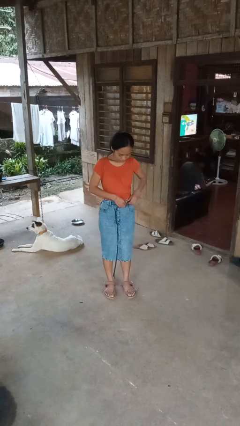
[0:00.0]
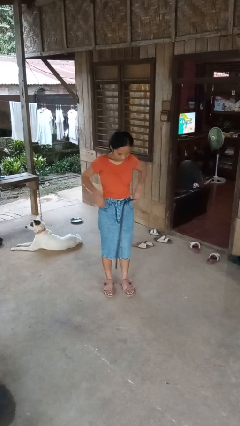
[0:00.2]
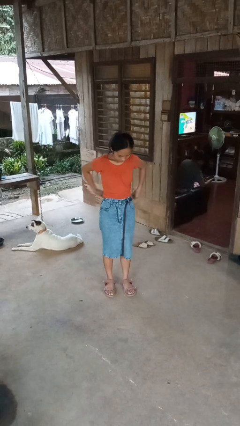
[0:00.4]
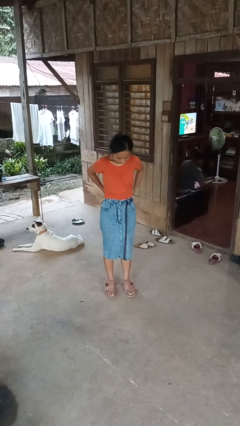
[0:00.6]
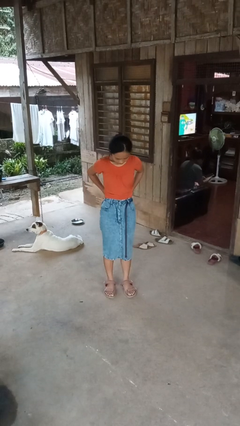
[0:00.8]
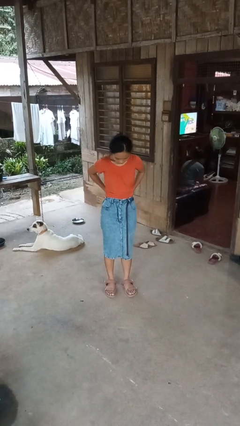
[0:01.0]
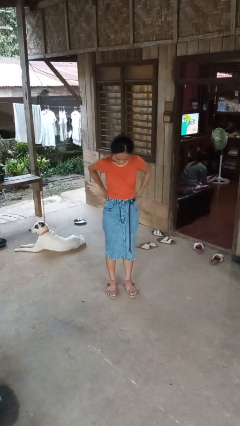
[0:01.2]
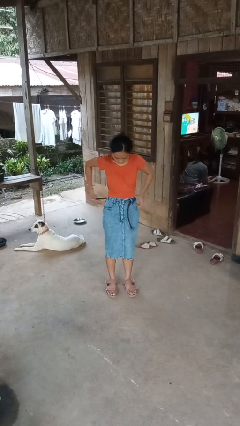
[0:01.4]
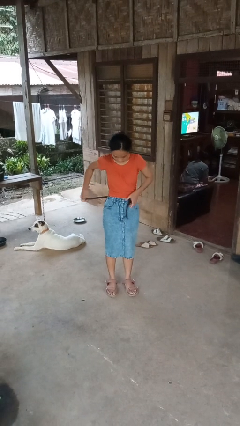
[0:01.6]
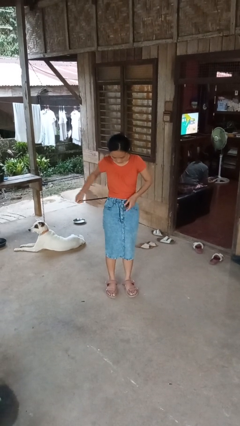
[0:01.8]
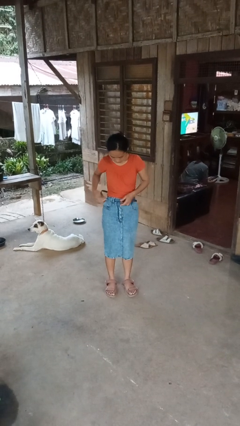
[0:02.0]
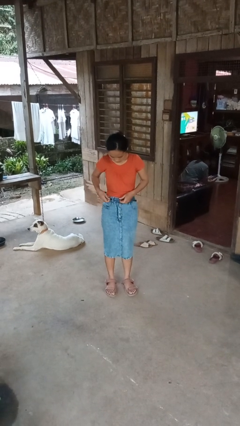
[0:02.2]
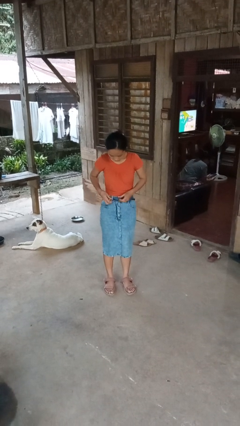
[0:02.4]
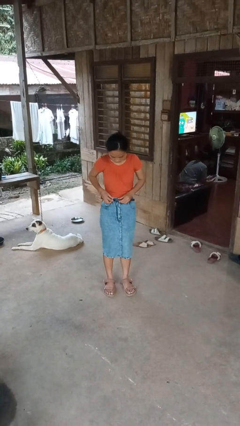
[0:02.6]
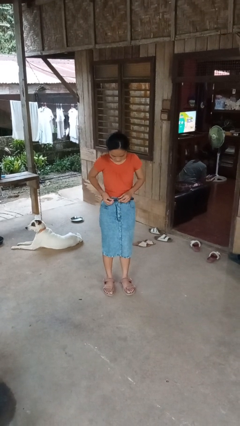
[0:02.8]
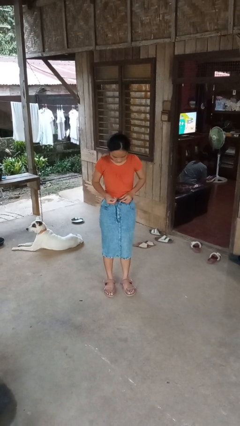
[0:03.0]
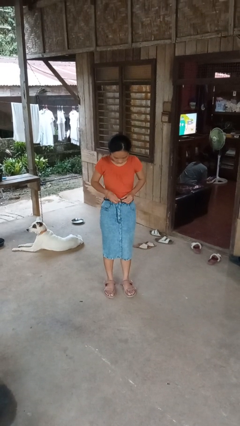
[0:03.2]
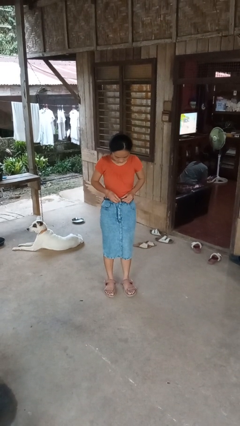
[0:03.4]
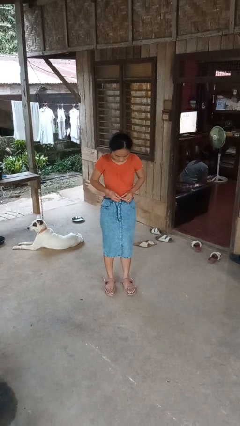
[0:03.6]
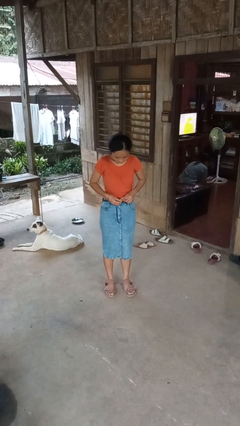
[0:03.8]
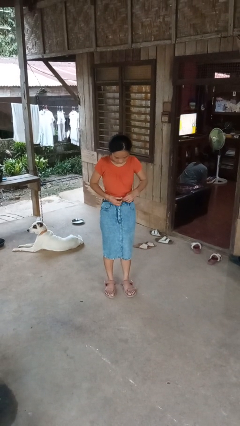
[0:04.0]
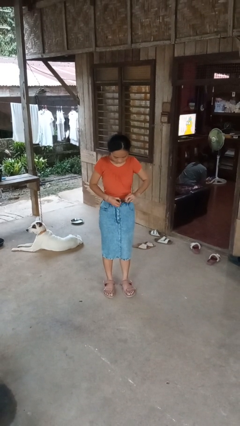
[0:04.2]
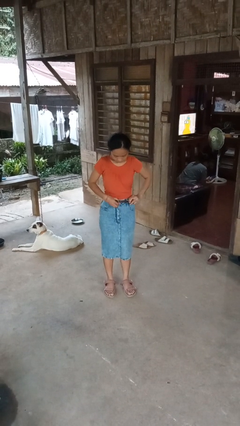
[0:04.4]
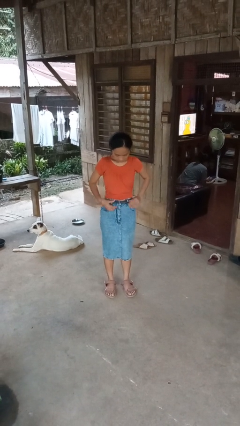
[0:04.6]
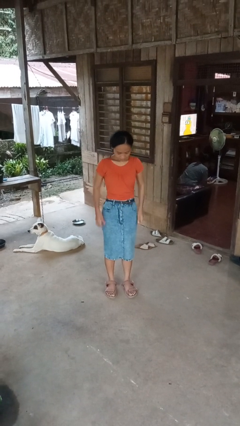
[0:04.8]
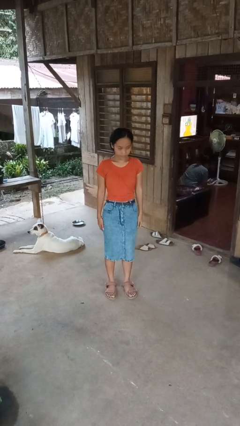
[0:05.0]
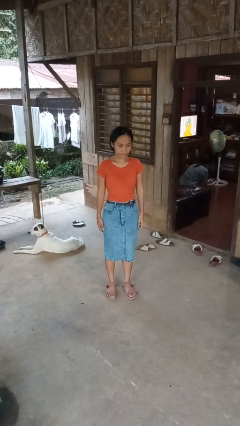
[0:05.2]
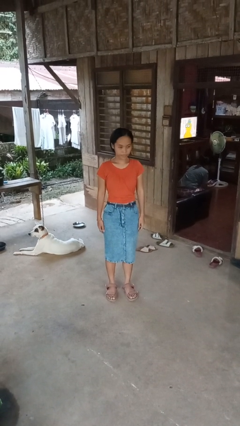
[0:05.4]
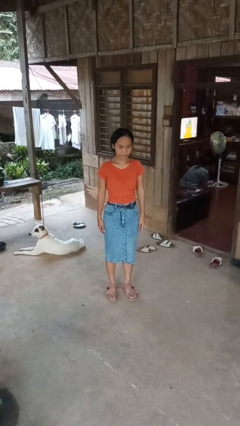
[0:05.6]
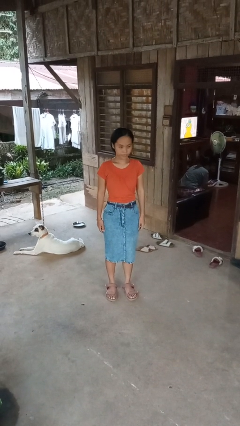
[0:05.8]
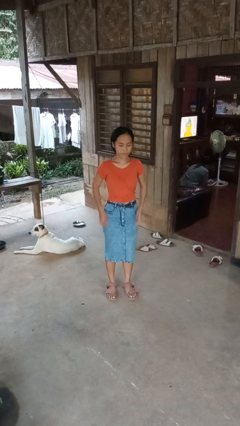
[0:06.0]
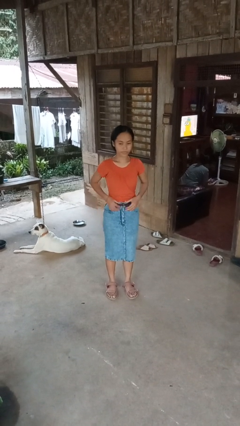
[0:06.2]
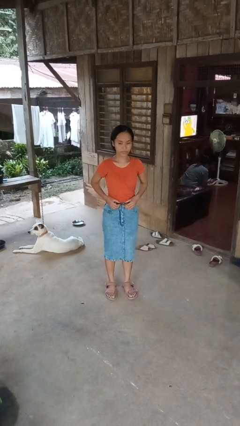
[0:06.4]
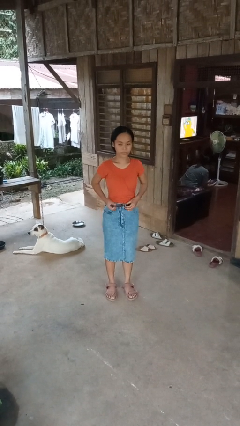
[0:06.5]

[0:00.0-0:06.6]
person puts on belt

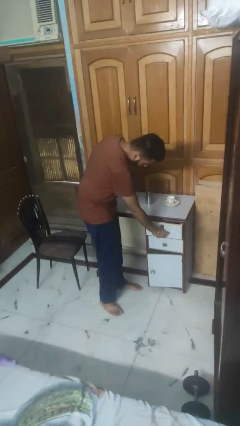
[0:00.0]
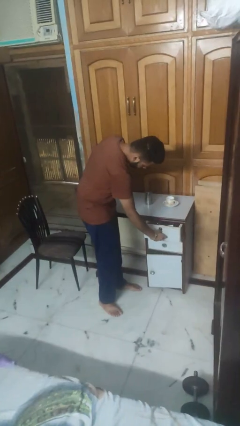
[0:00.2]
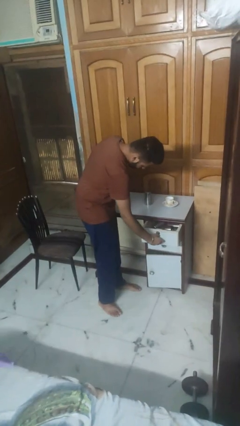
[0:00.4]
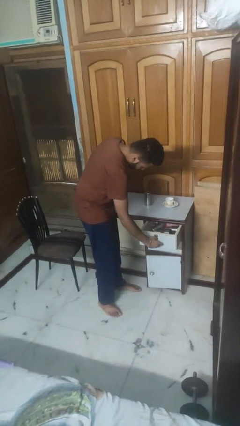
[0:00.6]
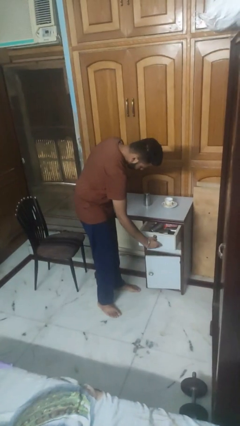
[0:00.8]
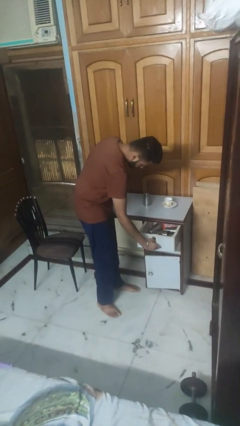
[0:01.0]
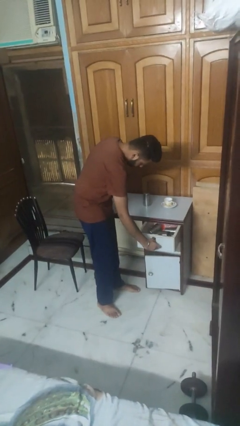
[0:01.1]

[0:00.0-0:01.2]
person opens kitchen drawer

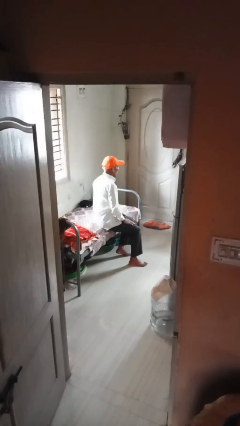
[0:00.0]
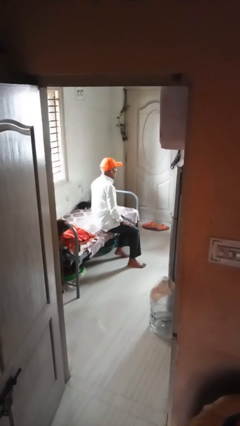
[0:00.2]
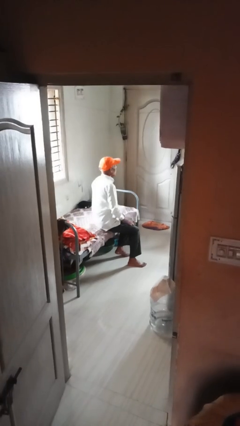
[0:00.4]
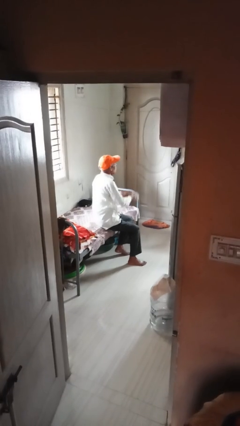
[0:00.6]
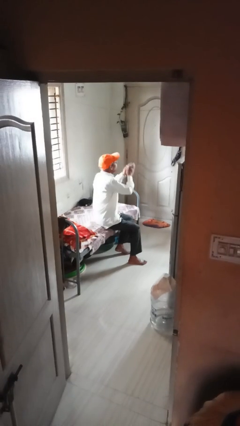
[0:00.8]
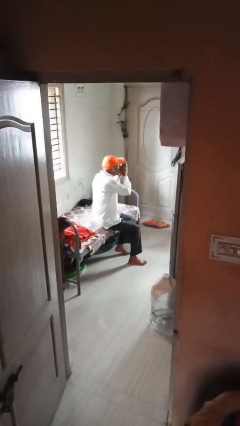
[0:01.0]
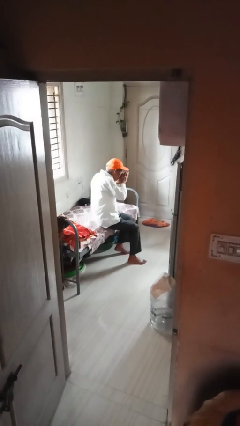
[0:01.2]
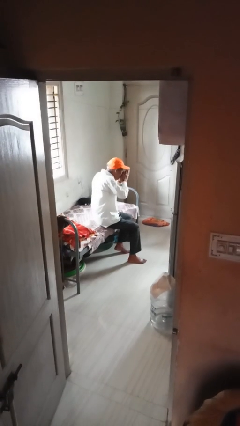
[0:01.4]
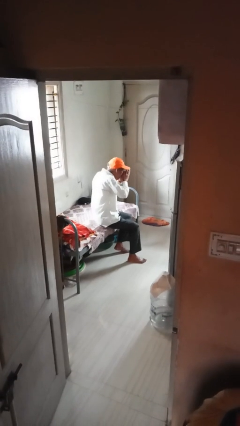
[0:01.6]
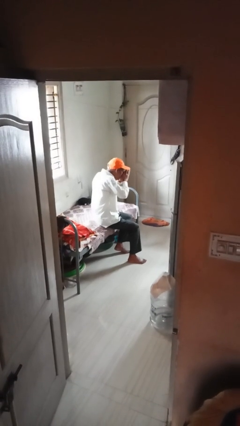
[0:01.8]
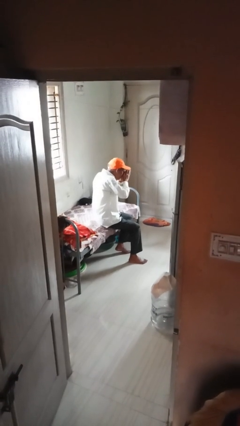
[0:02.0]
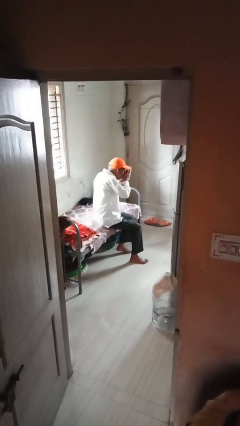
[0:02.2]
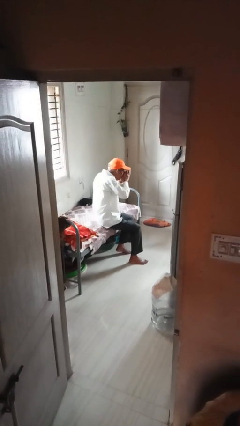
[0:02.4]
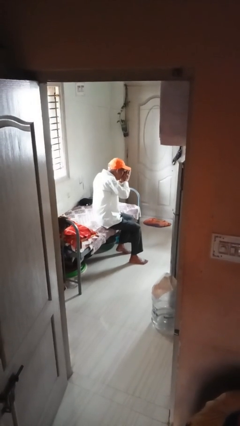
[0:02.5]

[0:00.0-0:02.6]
person sneezes into hand

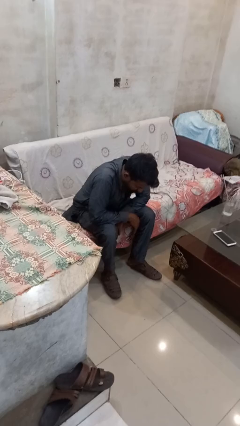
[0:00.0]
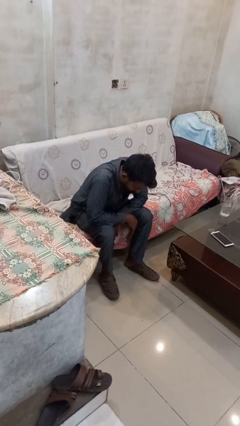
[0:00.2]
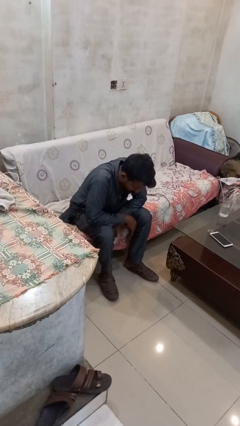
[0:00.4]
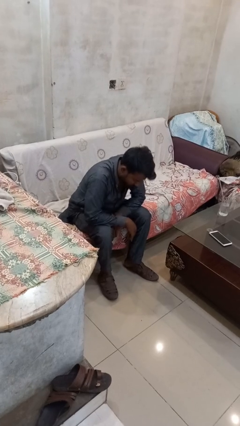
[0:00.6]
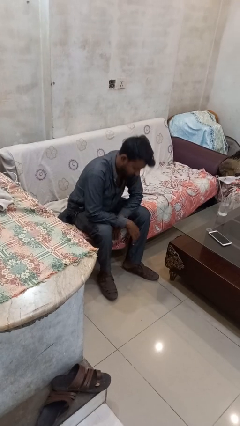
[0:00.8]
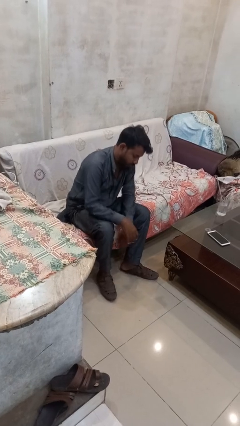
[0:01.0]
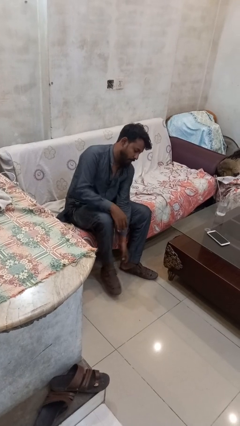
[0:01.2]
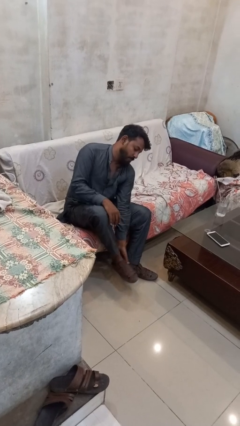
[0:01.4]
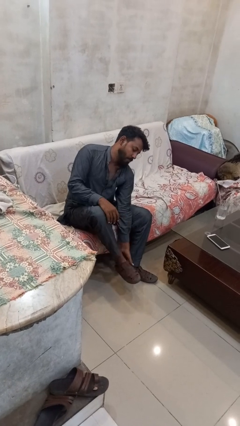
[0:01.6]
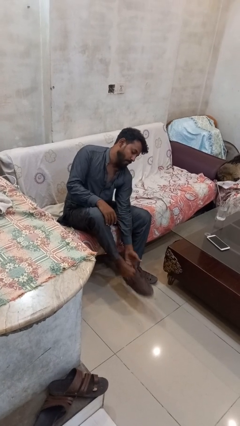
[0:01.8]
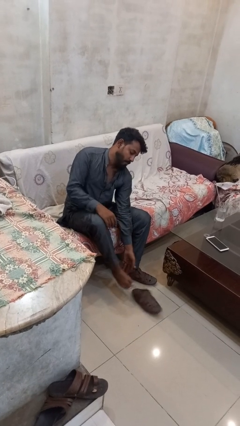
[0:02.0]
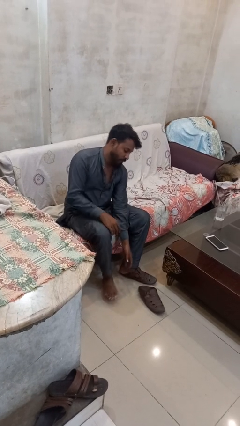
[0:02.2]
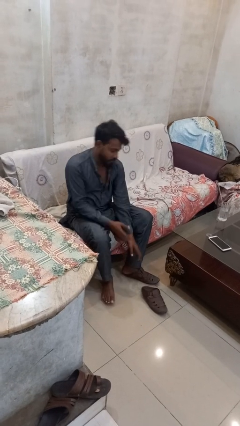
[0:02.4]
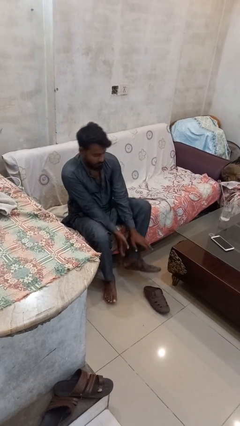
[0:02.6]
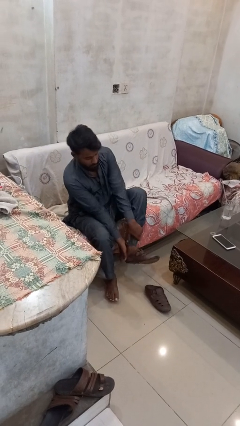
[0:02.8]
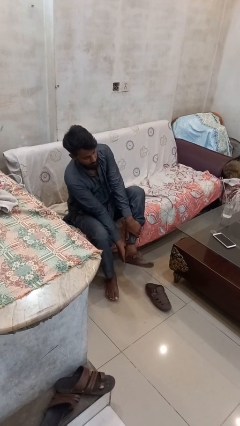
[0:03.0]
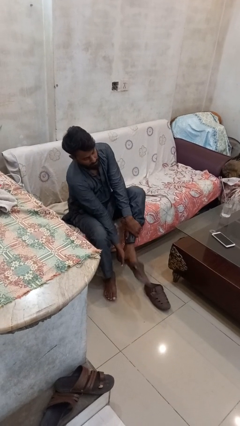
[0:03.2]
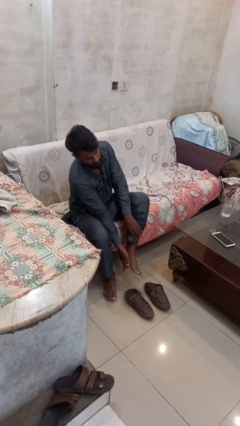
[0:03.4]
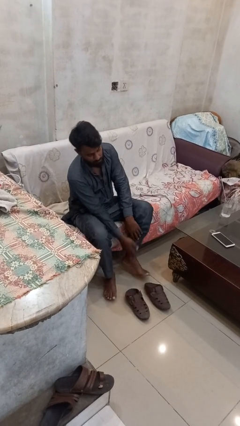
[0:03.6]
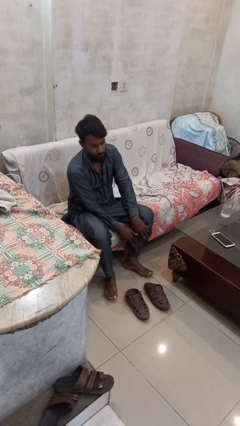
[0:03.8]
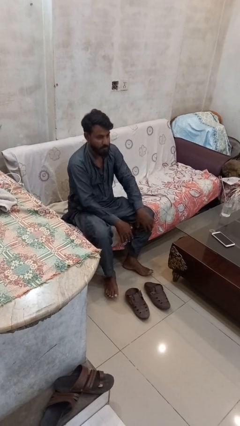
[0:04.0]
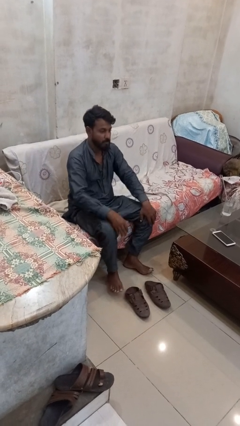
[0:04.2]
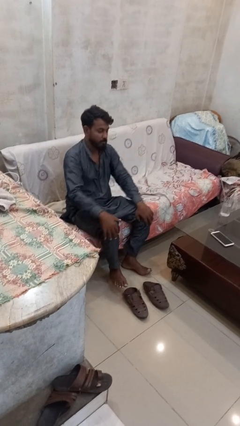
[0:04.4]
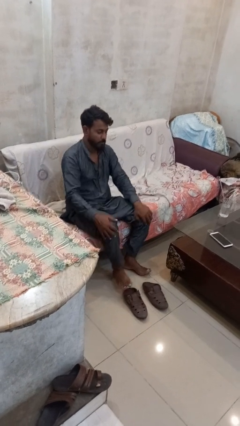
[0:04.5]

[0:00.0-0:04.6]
person takes off shoes

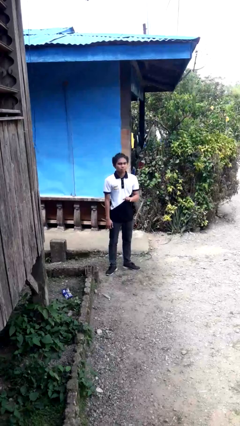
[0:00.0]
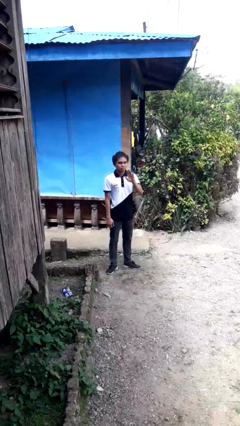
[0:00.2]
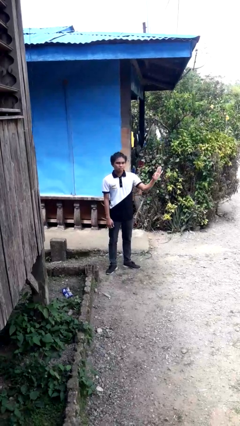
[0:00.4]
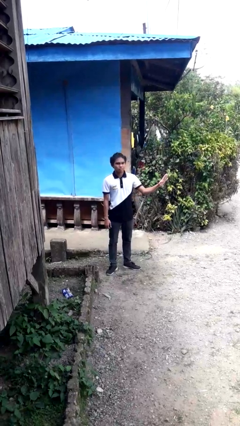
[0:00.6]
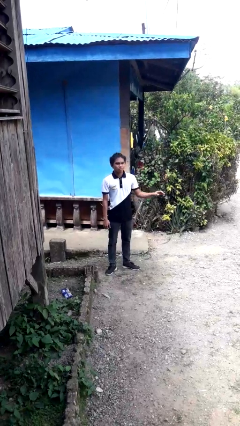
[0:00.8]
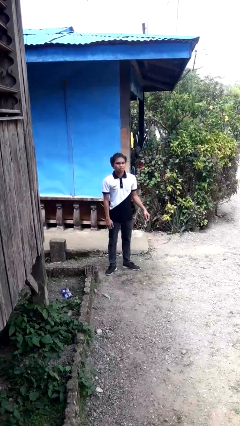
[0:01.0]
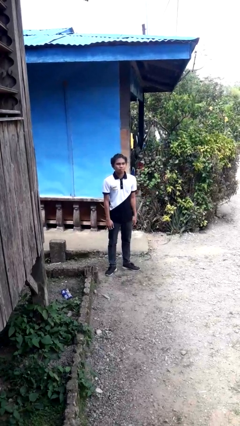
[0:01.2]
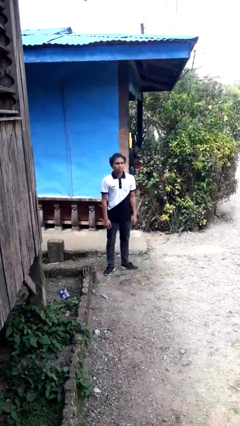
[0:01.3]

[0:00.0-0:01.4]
person gestures swipe left

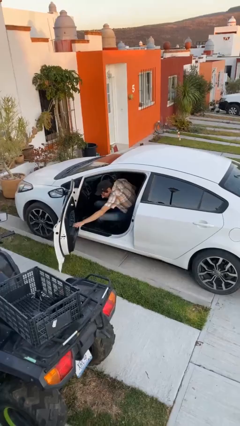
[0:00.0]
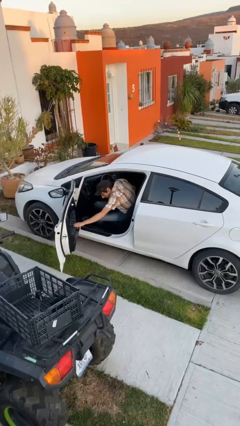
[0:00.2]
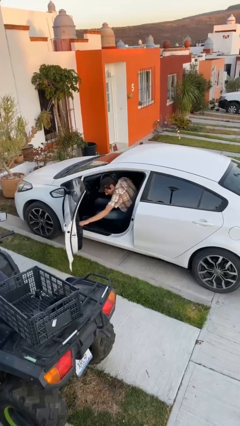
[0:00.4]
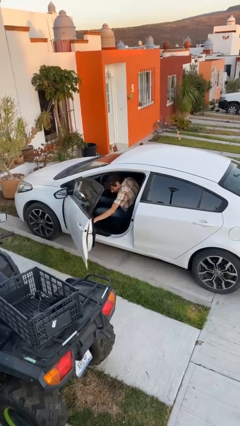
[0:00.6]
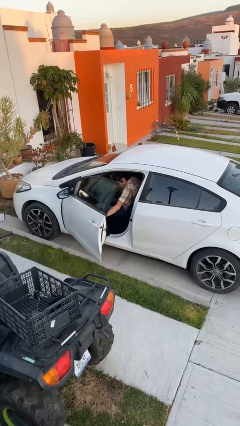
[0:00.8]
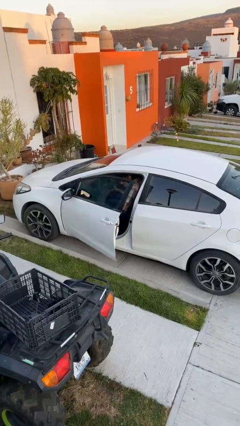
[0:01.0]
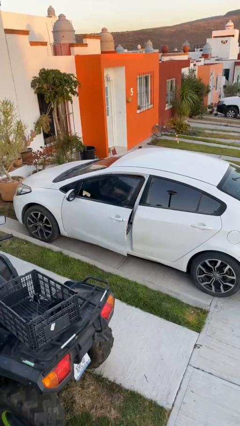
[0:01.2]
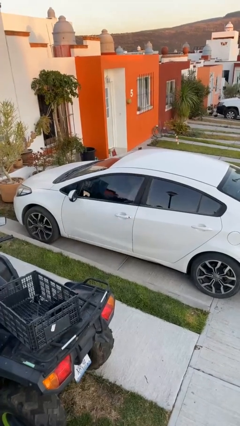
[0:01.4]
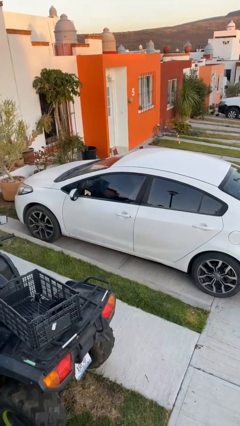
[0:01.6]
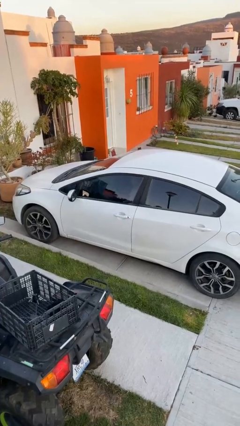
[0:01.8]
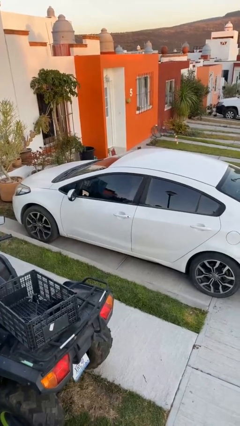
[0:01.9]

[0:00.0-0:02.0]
person closes car door
